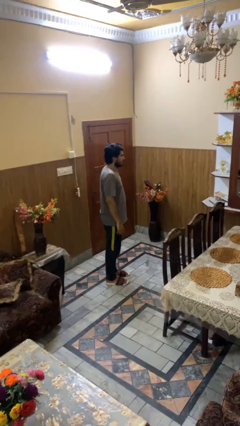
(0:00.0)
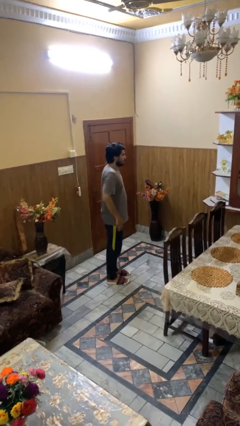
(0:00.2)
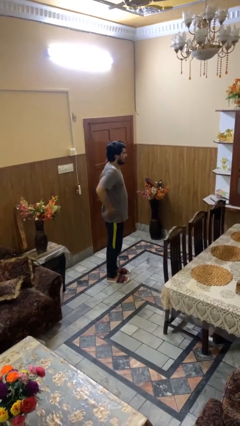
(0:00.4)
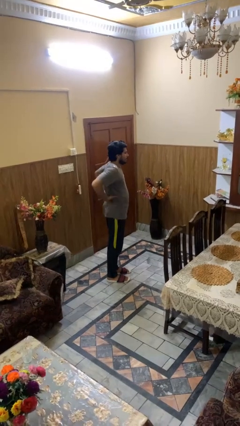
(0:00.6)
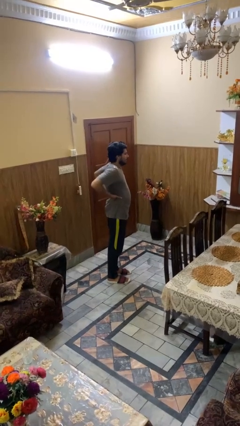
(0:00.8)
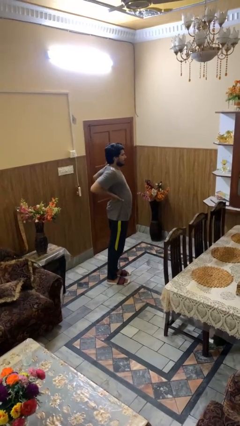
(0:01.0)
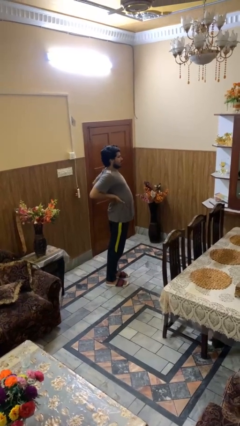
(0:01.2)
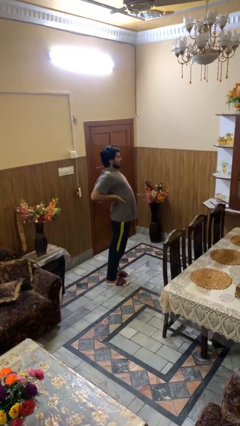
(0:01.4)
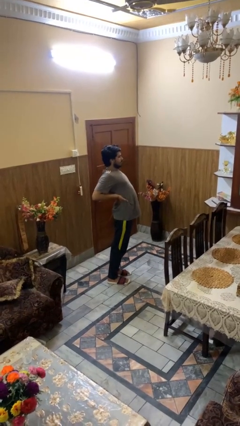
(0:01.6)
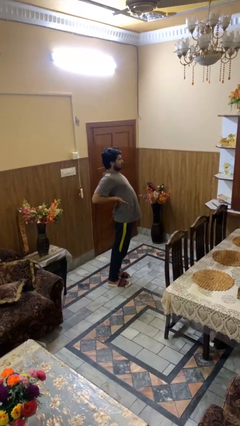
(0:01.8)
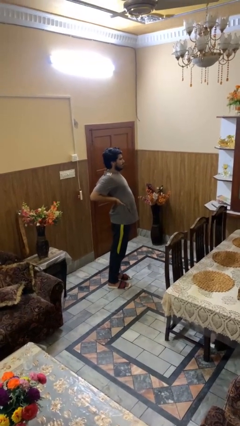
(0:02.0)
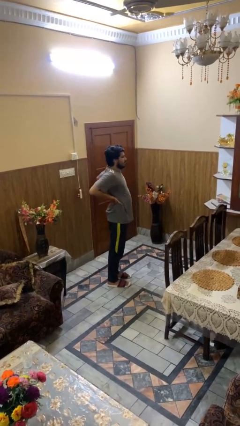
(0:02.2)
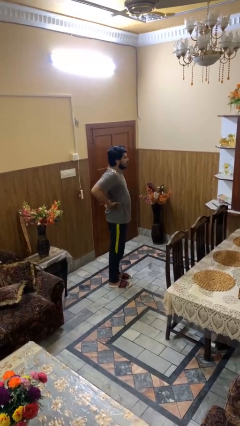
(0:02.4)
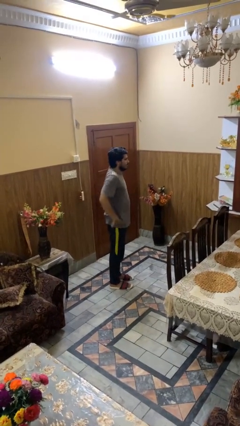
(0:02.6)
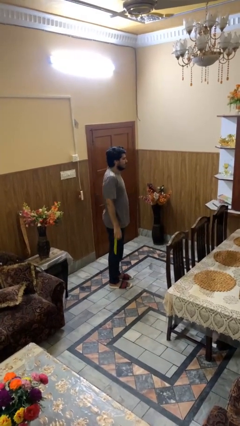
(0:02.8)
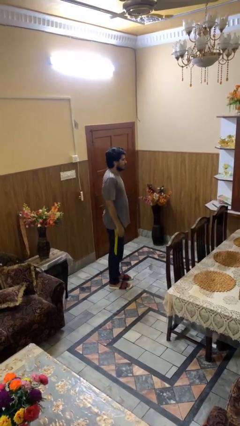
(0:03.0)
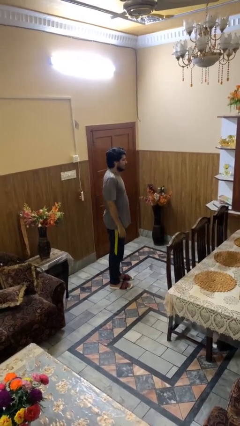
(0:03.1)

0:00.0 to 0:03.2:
person stretches back

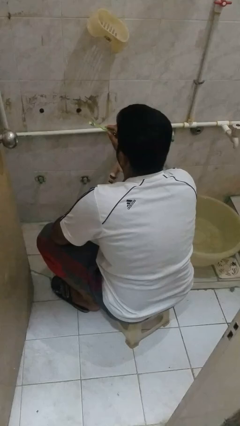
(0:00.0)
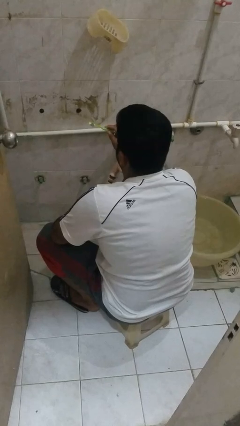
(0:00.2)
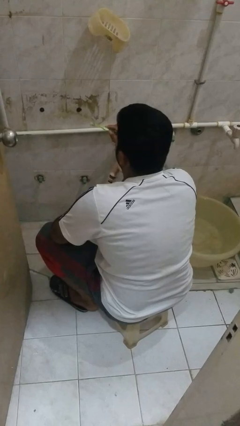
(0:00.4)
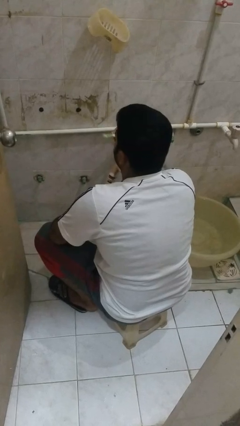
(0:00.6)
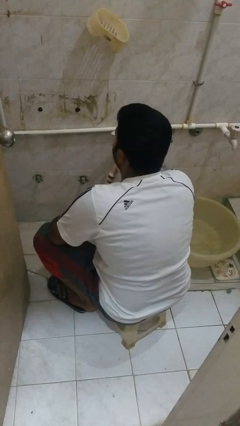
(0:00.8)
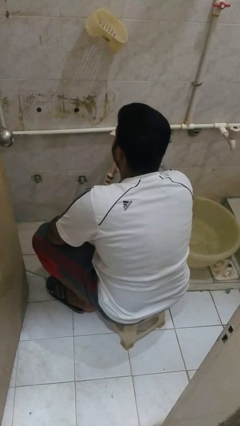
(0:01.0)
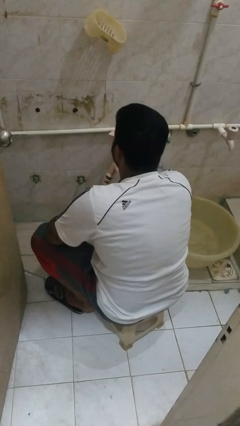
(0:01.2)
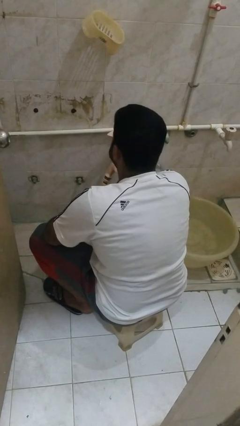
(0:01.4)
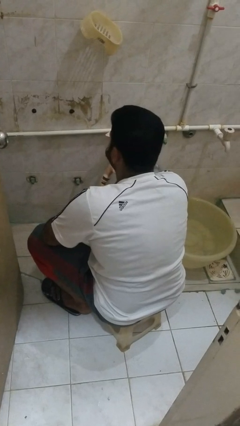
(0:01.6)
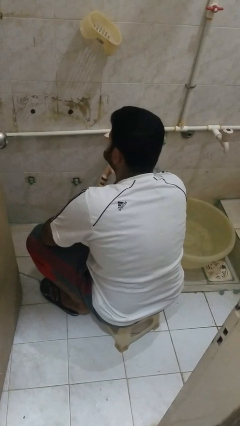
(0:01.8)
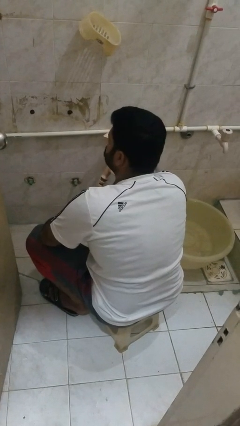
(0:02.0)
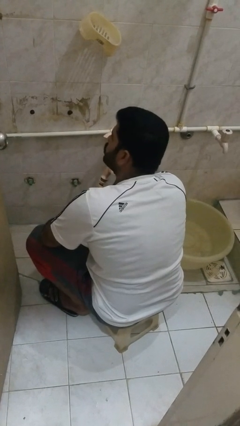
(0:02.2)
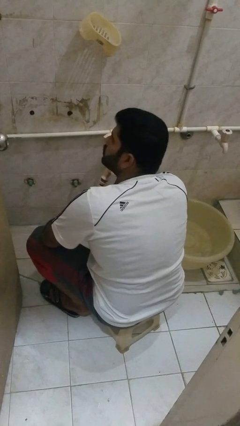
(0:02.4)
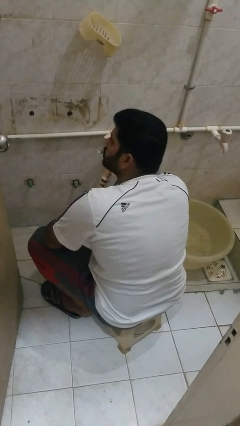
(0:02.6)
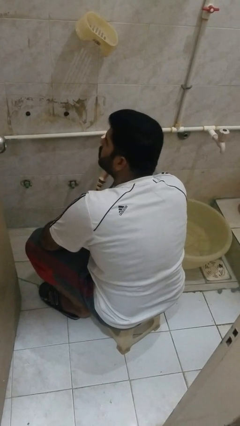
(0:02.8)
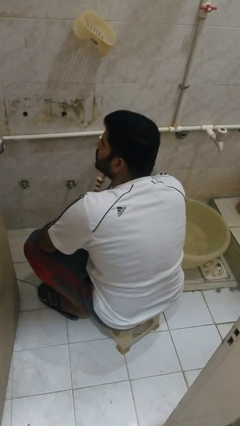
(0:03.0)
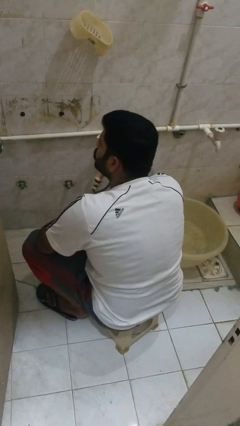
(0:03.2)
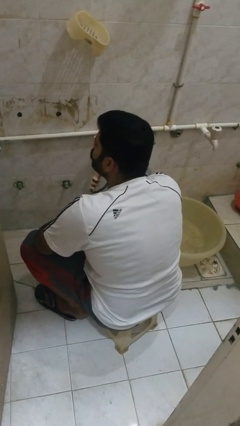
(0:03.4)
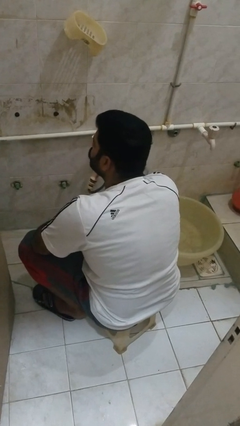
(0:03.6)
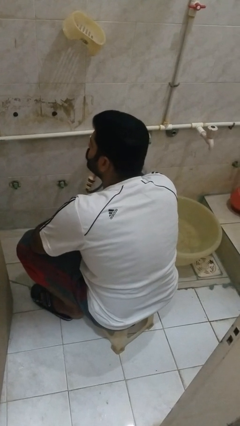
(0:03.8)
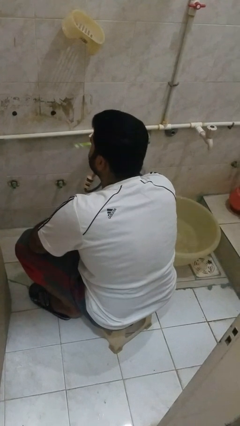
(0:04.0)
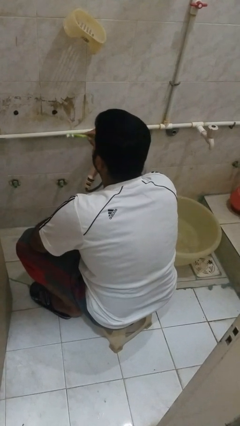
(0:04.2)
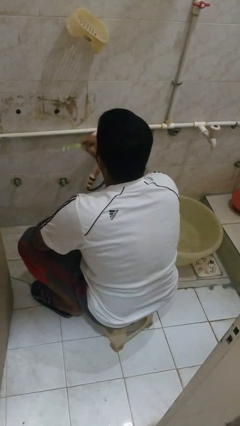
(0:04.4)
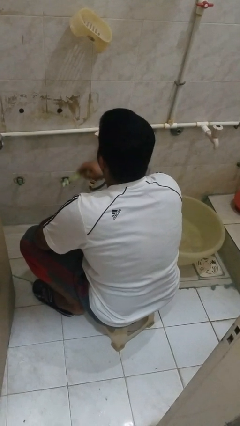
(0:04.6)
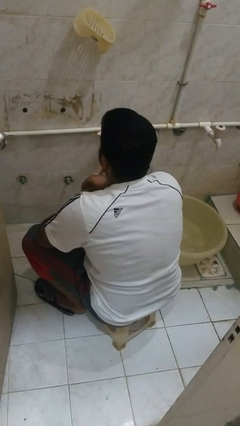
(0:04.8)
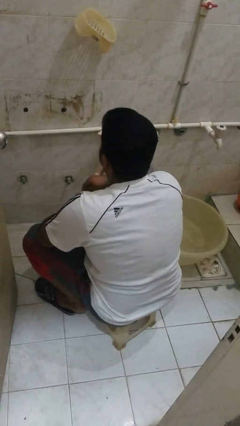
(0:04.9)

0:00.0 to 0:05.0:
person brushes teeth

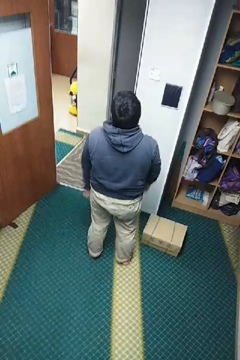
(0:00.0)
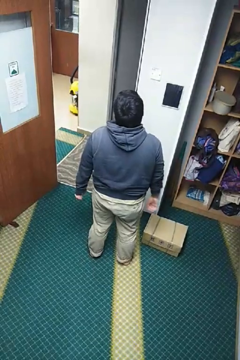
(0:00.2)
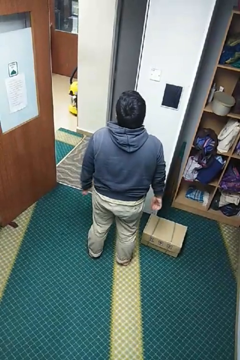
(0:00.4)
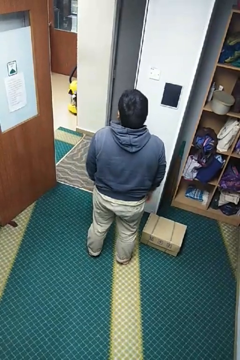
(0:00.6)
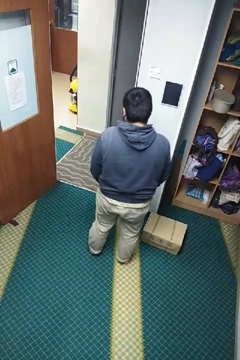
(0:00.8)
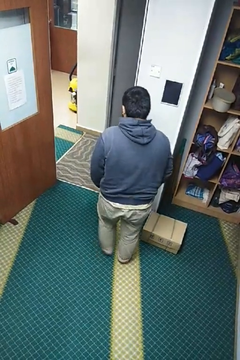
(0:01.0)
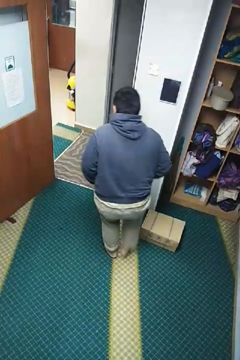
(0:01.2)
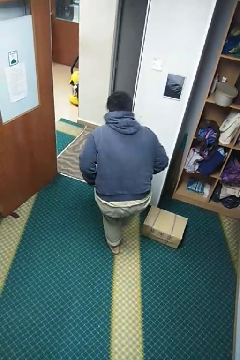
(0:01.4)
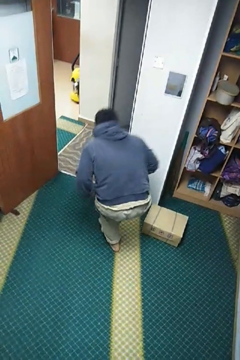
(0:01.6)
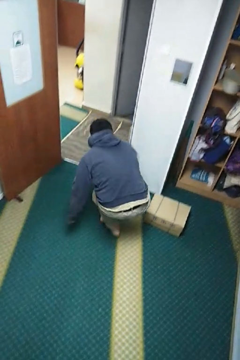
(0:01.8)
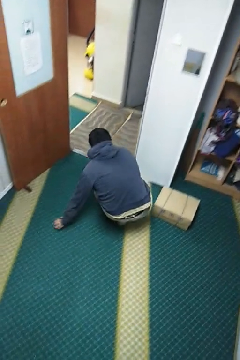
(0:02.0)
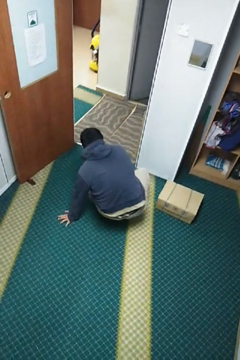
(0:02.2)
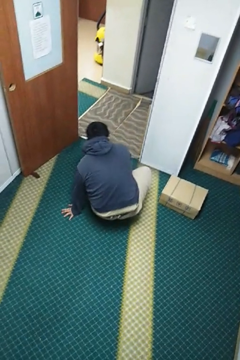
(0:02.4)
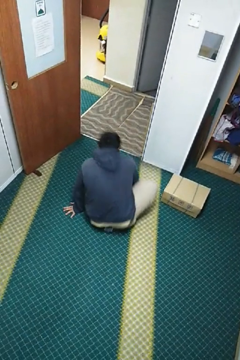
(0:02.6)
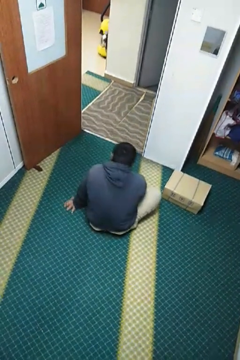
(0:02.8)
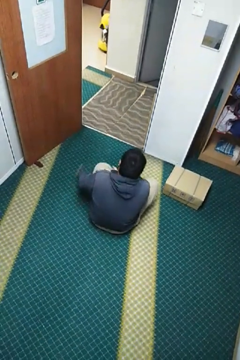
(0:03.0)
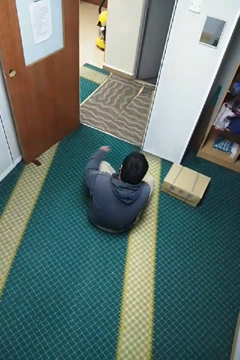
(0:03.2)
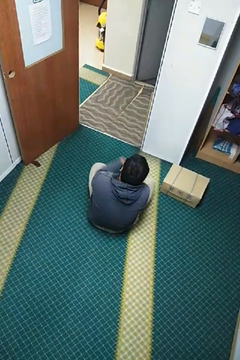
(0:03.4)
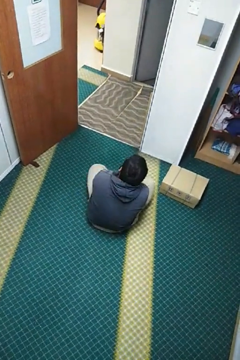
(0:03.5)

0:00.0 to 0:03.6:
person sits crisscross

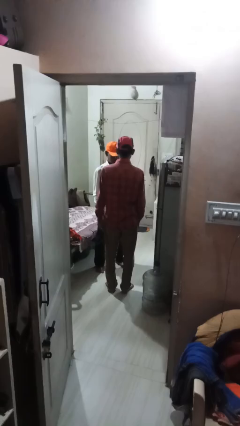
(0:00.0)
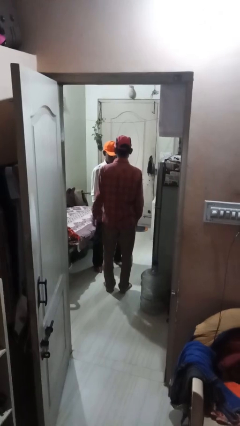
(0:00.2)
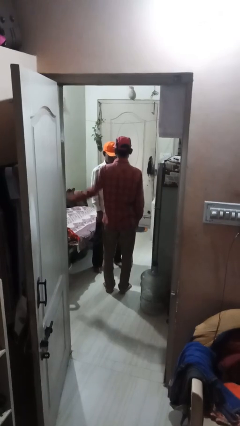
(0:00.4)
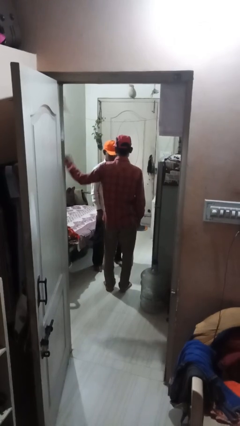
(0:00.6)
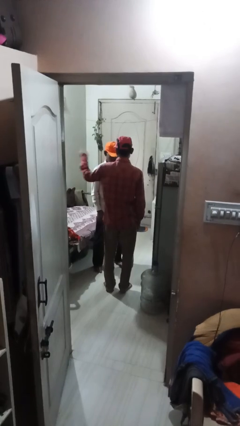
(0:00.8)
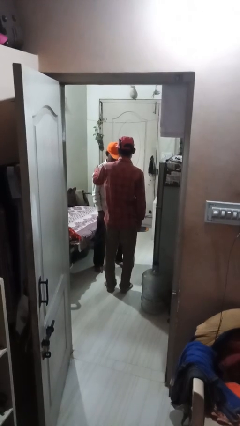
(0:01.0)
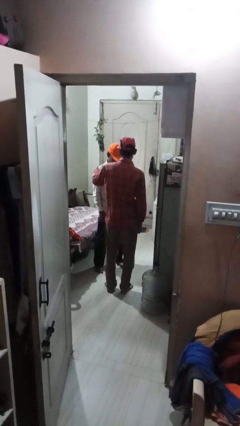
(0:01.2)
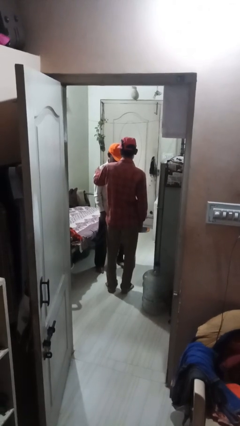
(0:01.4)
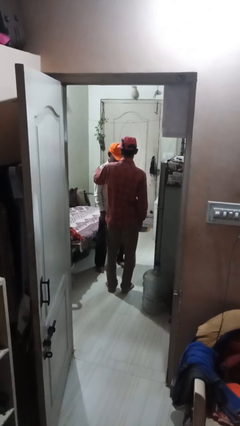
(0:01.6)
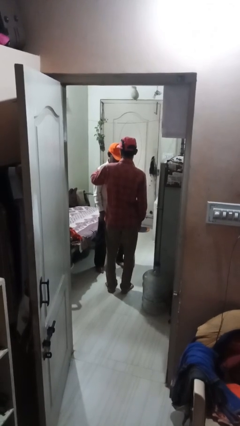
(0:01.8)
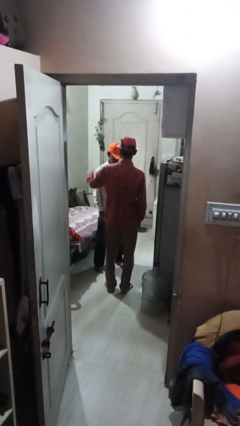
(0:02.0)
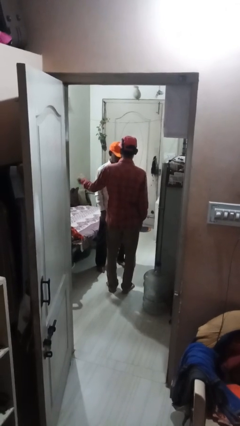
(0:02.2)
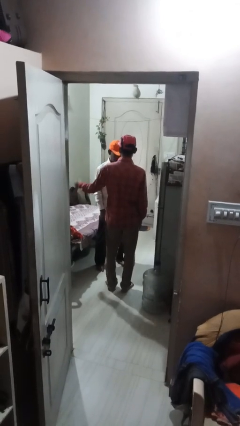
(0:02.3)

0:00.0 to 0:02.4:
person pounds shoulders of person

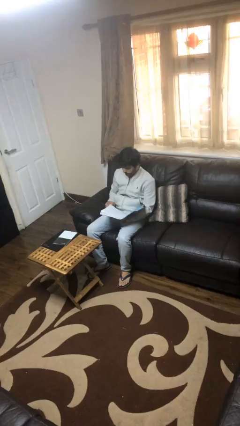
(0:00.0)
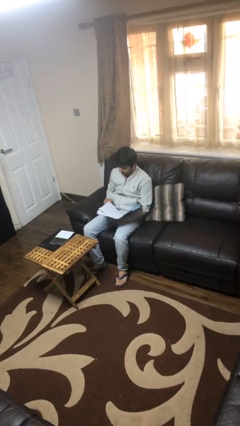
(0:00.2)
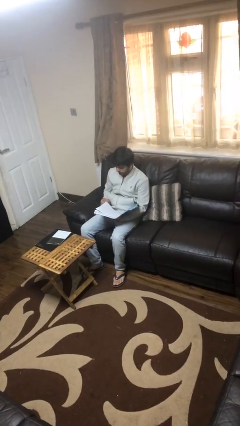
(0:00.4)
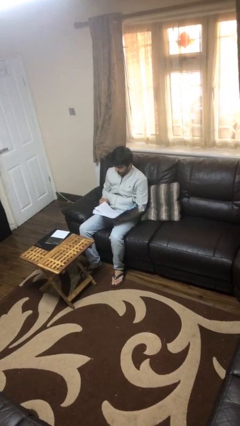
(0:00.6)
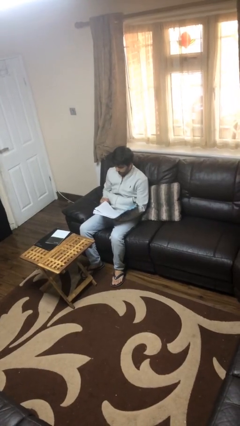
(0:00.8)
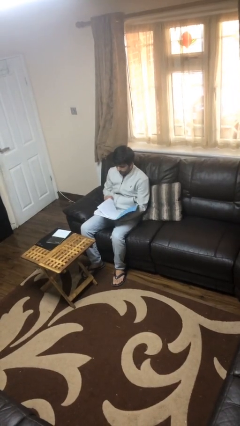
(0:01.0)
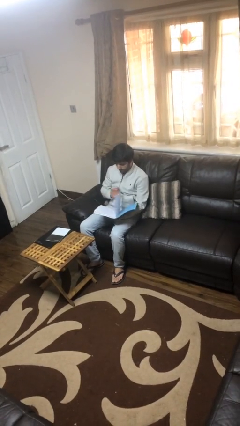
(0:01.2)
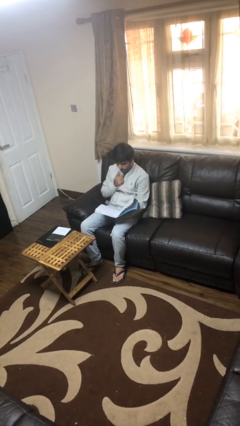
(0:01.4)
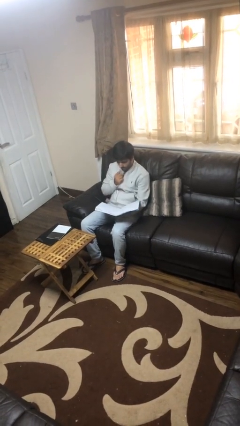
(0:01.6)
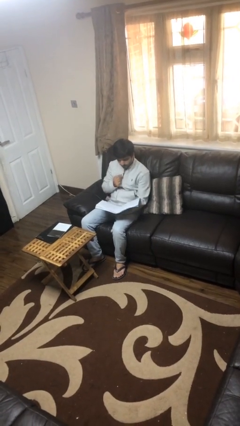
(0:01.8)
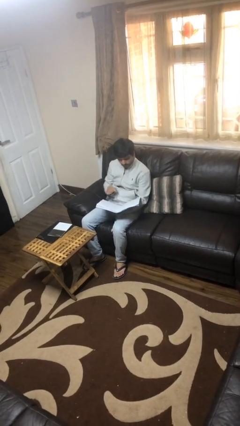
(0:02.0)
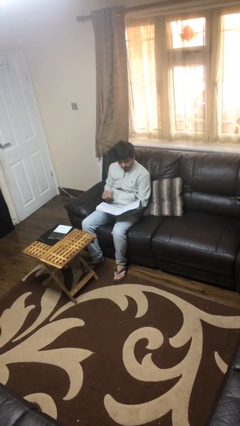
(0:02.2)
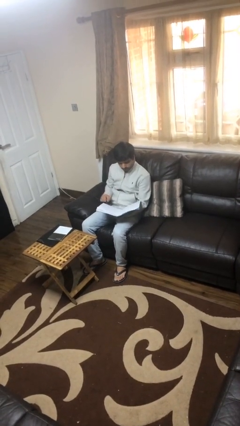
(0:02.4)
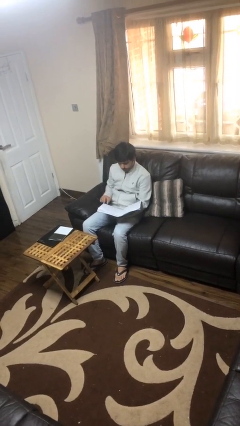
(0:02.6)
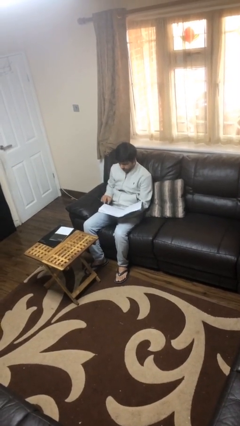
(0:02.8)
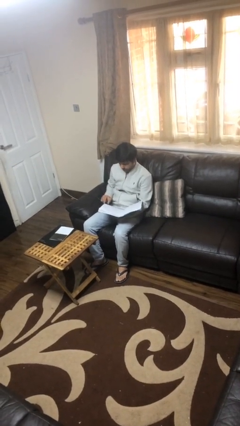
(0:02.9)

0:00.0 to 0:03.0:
person reads document

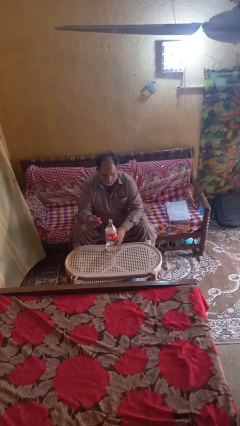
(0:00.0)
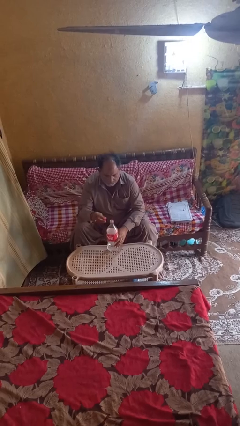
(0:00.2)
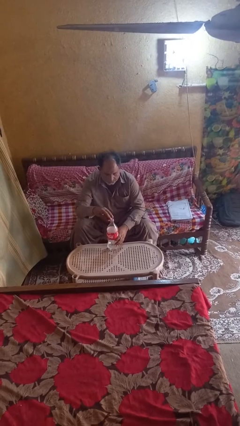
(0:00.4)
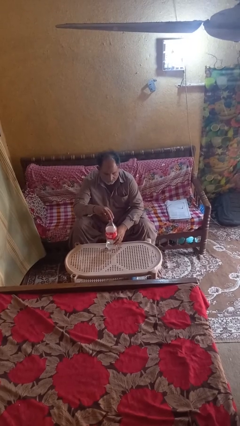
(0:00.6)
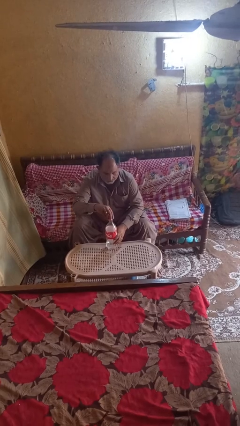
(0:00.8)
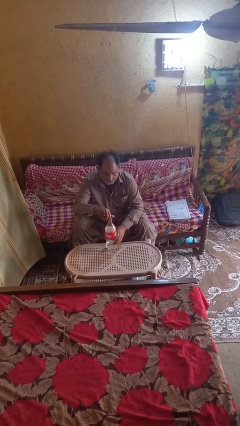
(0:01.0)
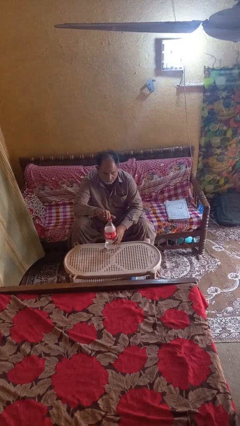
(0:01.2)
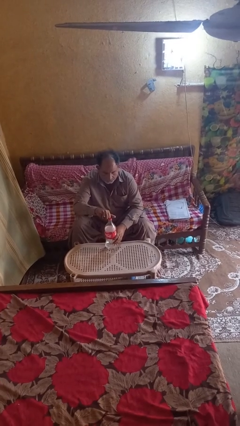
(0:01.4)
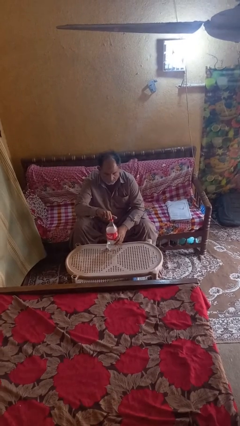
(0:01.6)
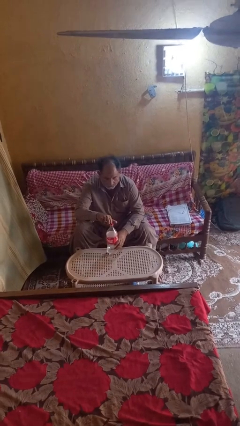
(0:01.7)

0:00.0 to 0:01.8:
person screws lid to bottle
